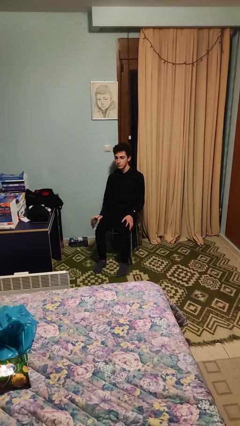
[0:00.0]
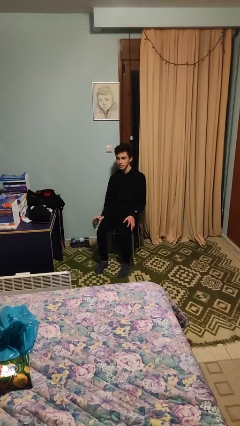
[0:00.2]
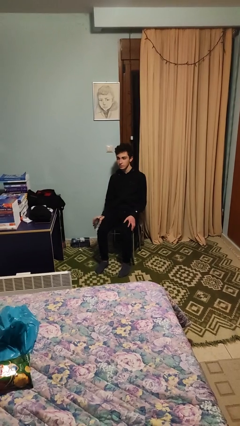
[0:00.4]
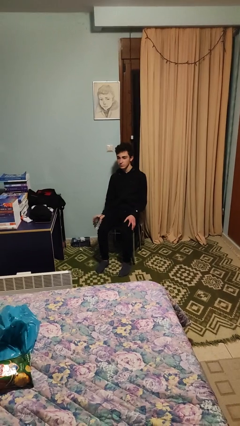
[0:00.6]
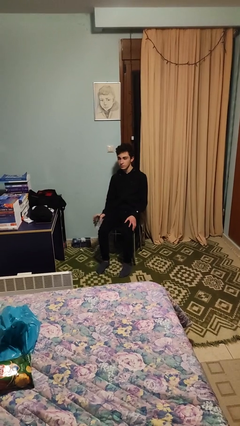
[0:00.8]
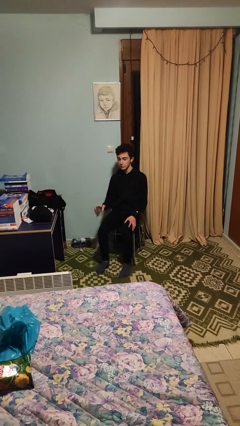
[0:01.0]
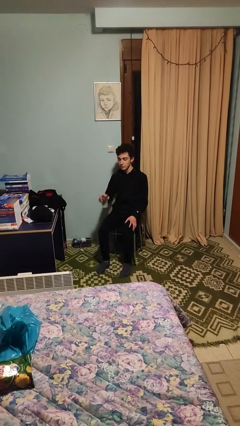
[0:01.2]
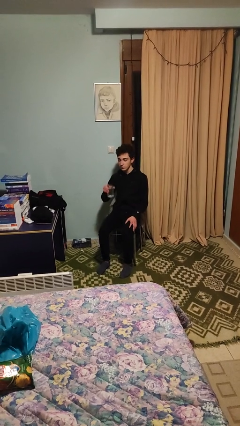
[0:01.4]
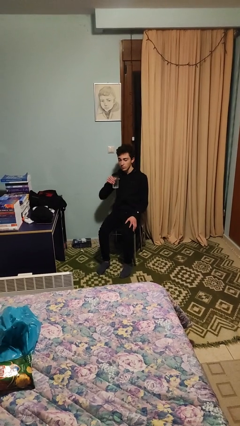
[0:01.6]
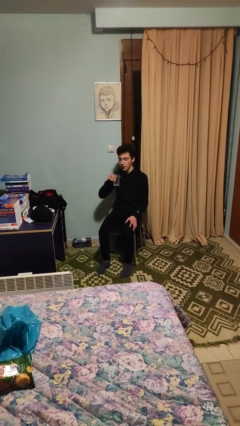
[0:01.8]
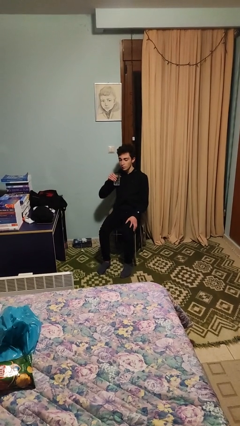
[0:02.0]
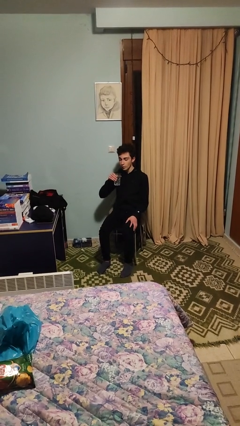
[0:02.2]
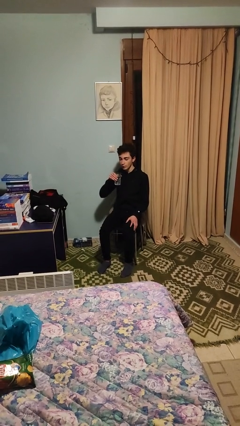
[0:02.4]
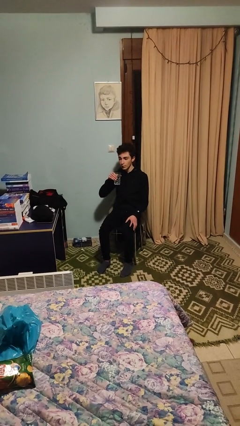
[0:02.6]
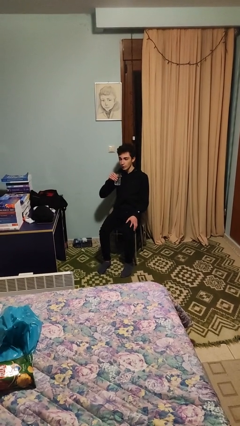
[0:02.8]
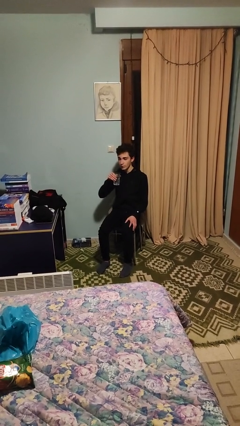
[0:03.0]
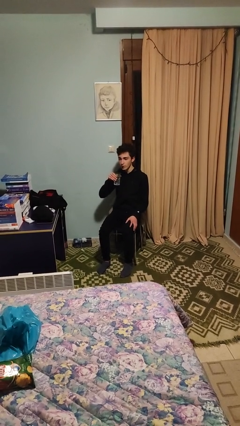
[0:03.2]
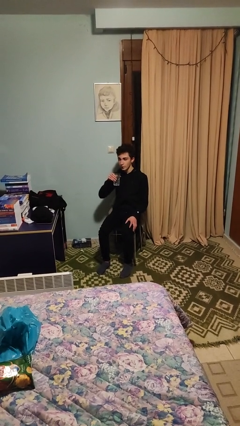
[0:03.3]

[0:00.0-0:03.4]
person drinks from straw

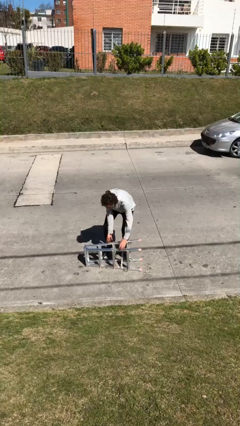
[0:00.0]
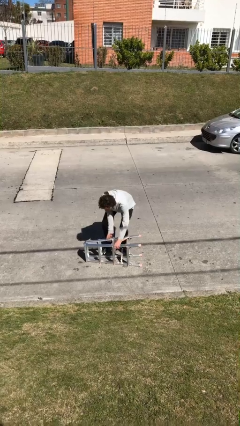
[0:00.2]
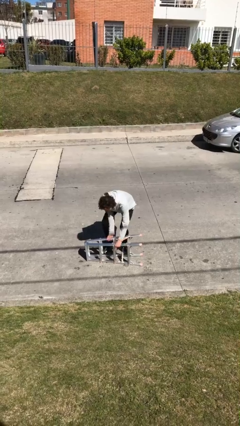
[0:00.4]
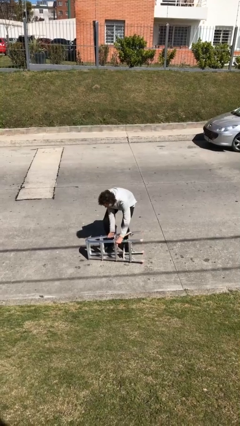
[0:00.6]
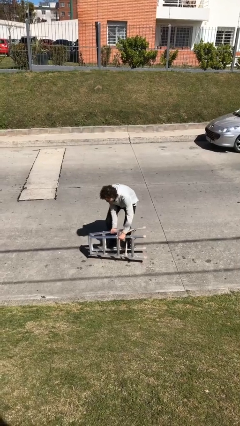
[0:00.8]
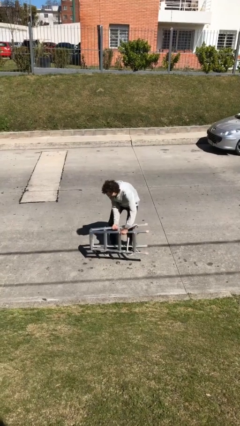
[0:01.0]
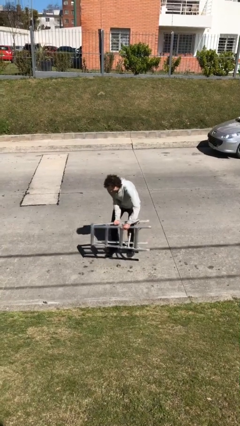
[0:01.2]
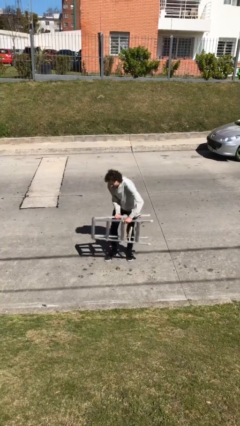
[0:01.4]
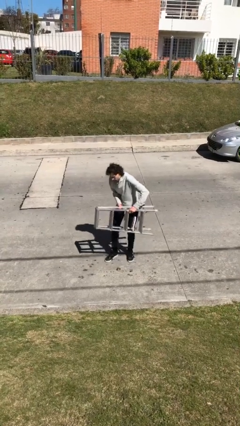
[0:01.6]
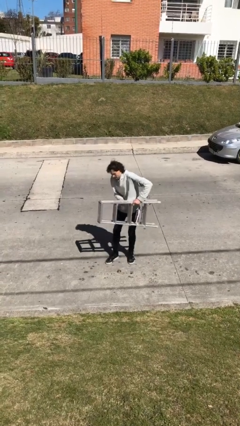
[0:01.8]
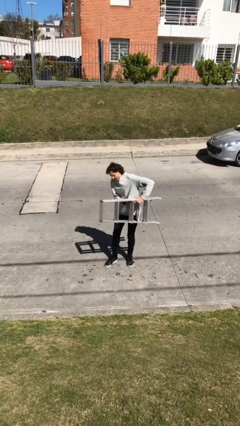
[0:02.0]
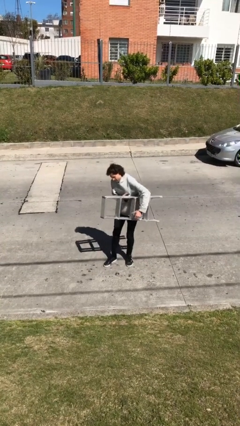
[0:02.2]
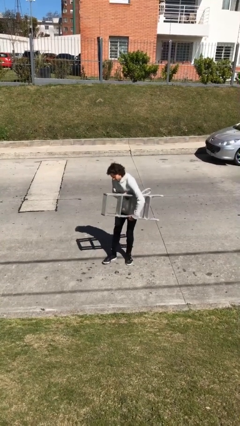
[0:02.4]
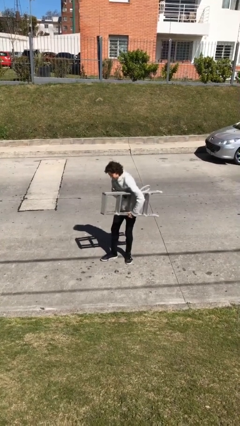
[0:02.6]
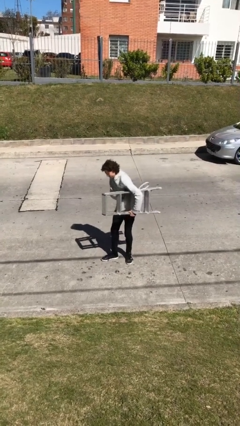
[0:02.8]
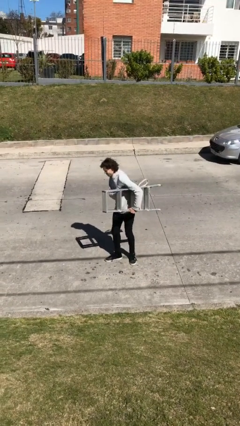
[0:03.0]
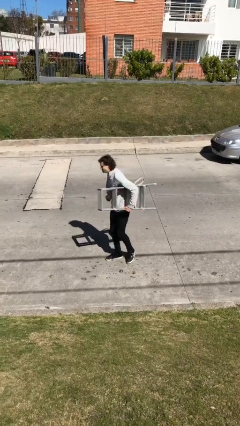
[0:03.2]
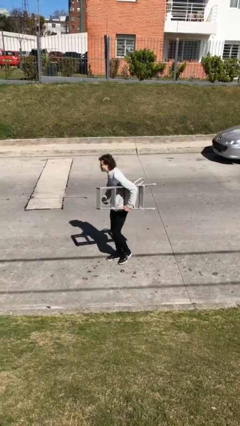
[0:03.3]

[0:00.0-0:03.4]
person picks up object from floor

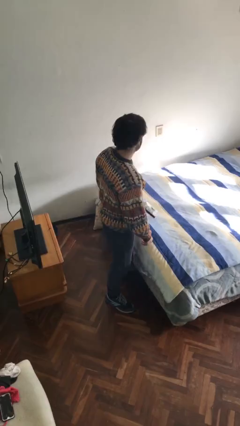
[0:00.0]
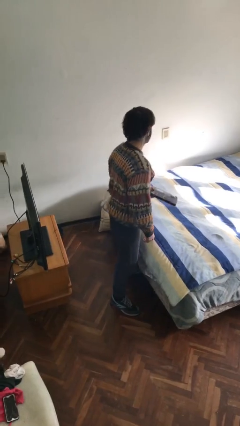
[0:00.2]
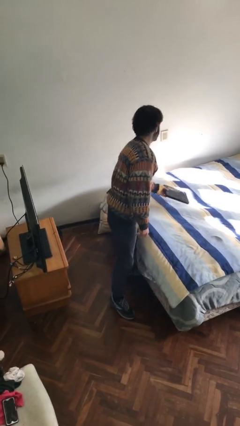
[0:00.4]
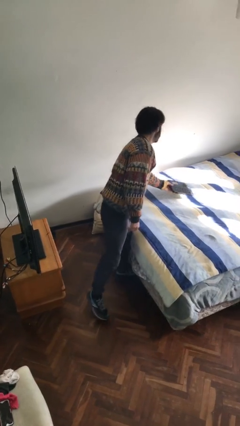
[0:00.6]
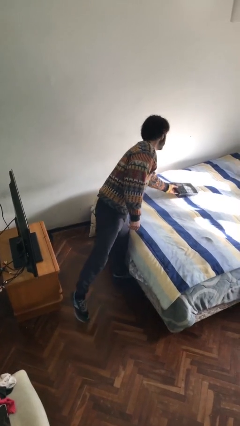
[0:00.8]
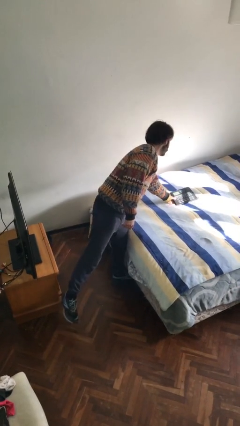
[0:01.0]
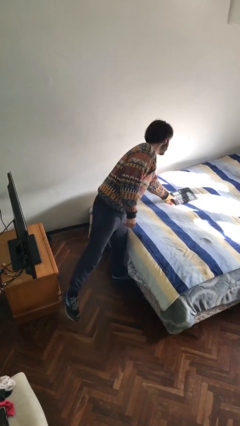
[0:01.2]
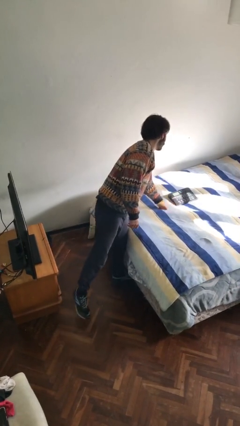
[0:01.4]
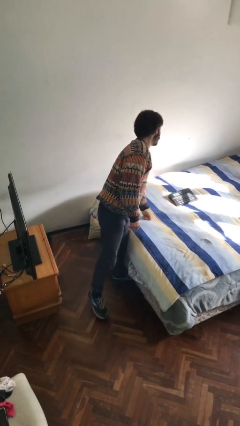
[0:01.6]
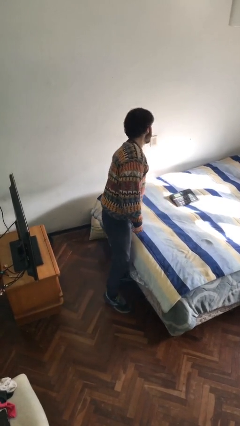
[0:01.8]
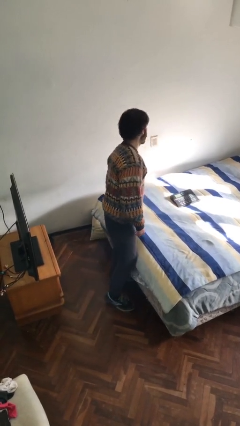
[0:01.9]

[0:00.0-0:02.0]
person puts down object on bed

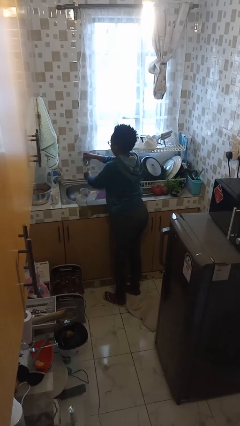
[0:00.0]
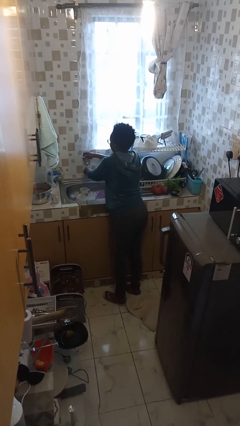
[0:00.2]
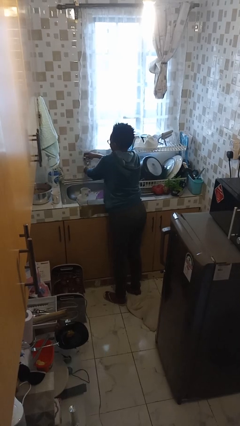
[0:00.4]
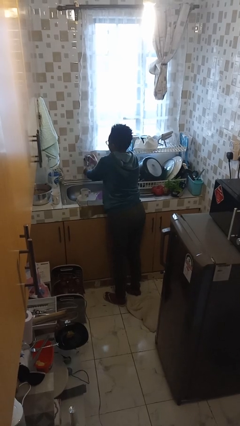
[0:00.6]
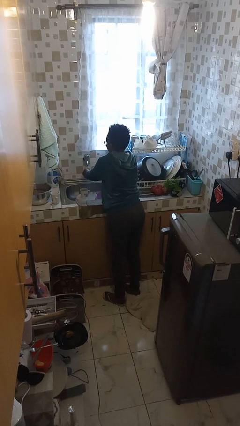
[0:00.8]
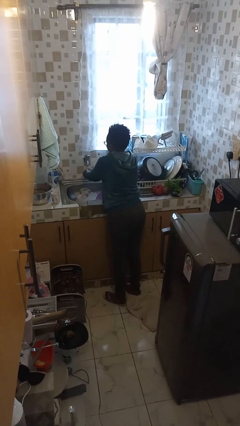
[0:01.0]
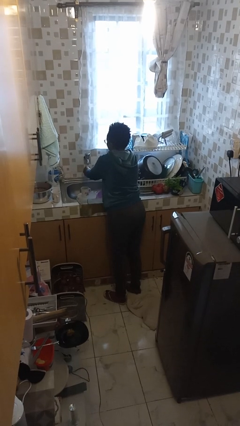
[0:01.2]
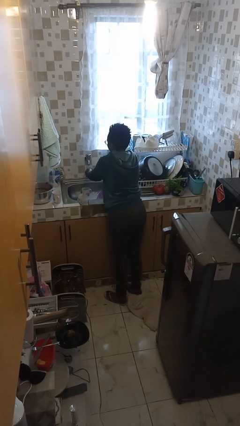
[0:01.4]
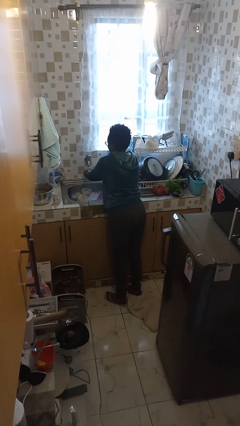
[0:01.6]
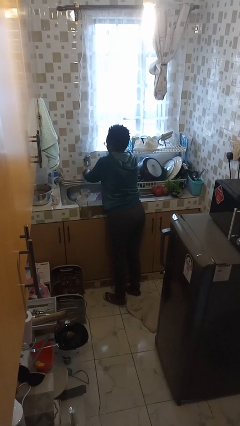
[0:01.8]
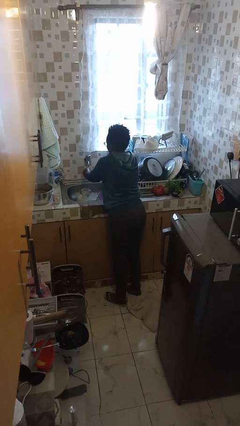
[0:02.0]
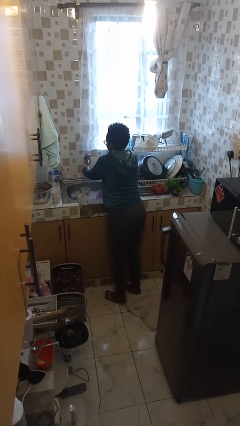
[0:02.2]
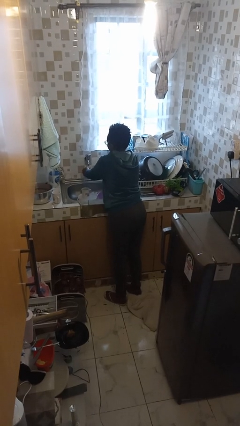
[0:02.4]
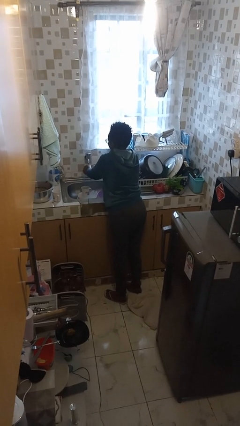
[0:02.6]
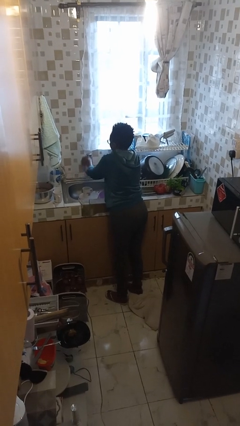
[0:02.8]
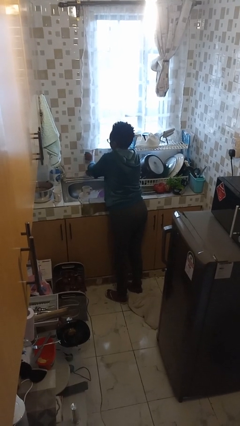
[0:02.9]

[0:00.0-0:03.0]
person washes hands

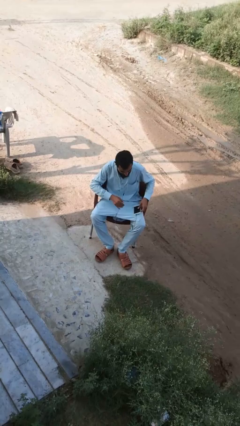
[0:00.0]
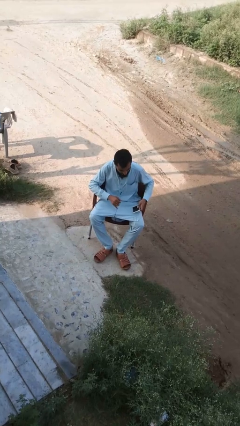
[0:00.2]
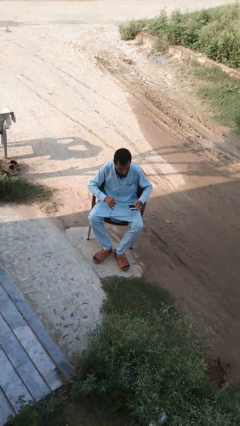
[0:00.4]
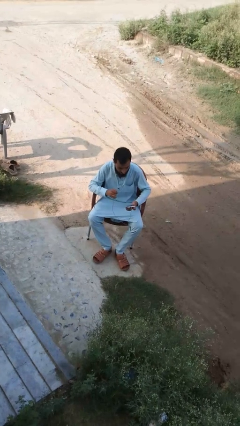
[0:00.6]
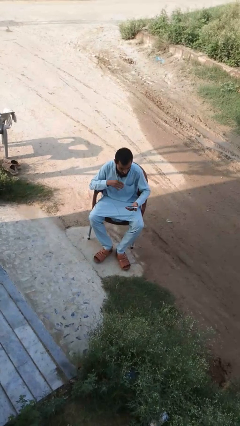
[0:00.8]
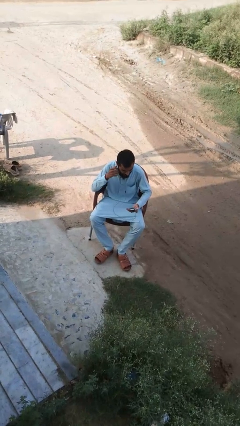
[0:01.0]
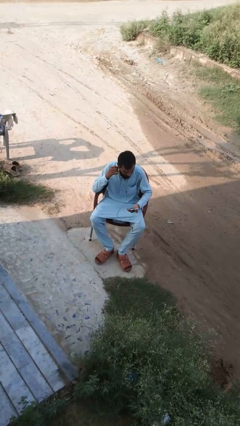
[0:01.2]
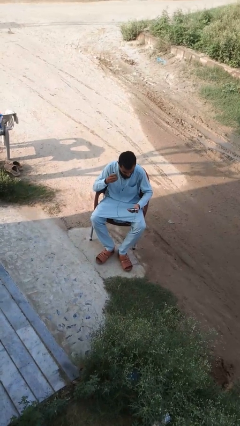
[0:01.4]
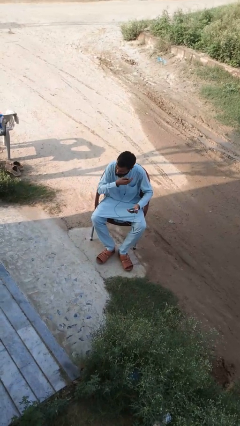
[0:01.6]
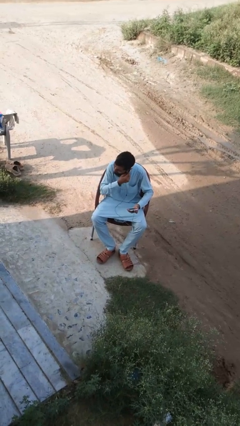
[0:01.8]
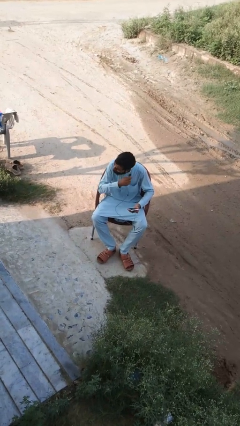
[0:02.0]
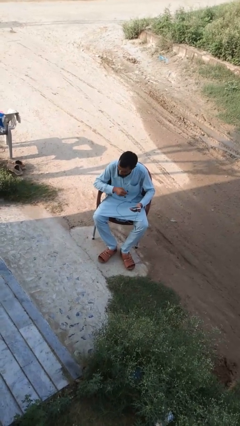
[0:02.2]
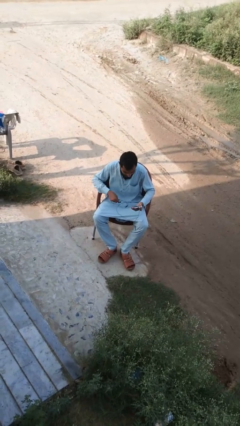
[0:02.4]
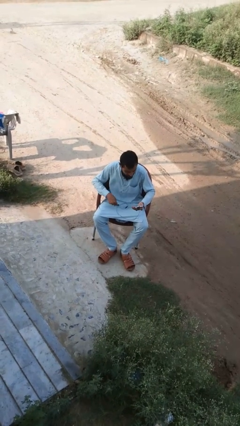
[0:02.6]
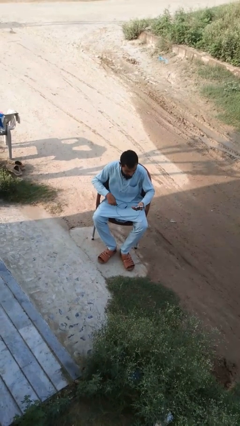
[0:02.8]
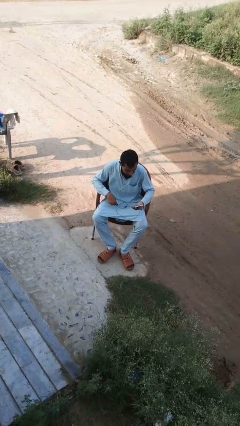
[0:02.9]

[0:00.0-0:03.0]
person takes off headphones

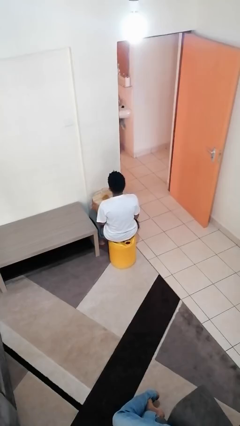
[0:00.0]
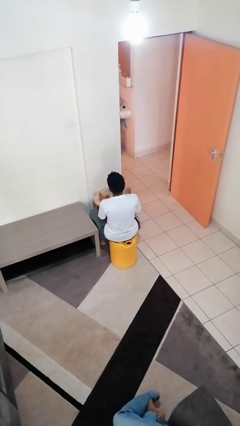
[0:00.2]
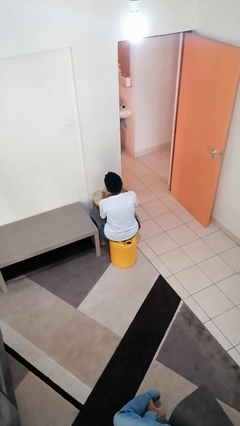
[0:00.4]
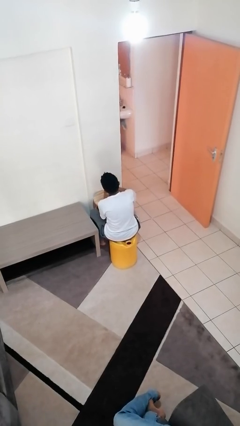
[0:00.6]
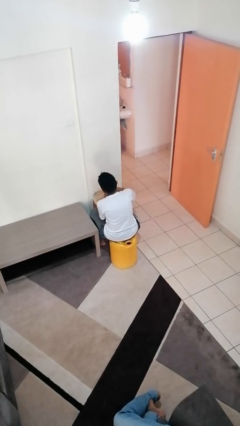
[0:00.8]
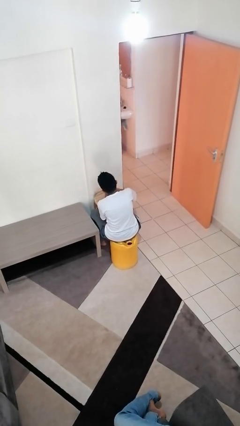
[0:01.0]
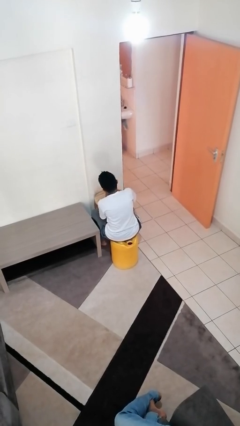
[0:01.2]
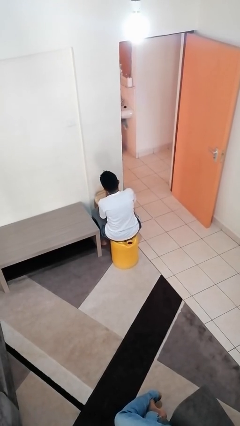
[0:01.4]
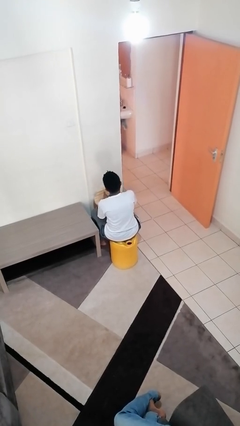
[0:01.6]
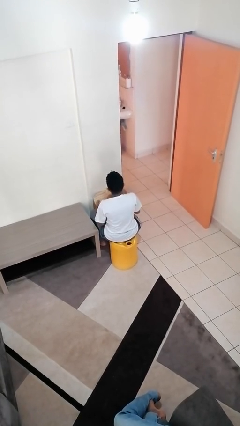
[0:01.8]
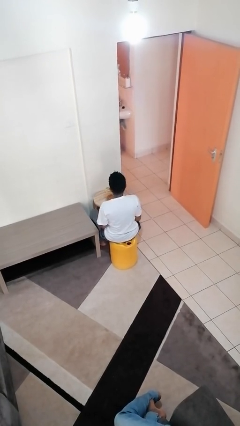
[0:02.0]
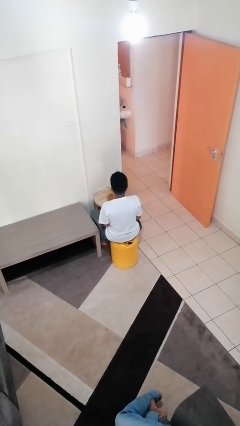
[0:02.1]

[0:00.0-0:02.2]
person closes jar

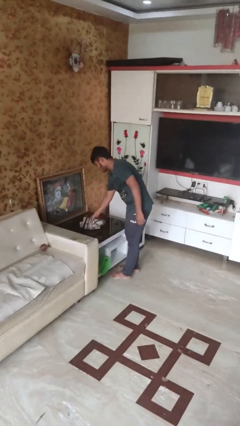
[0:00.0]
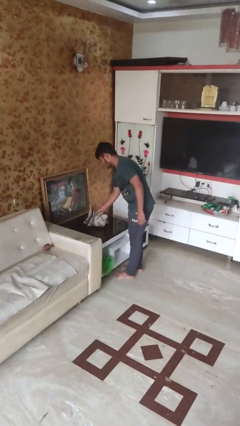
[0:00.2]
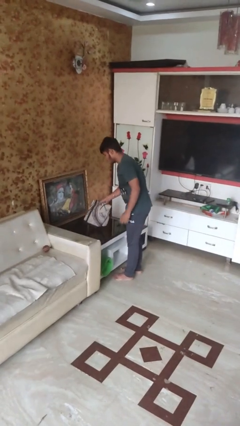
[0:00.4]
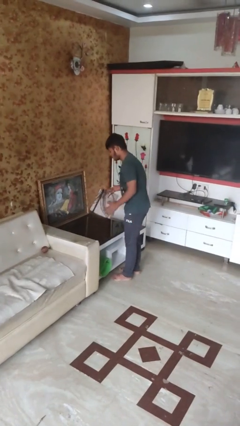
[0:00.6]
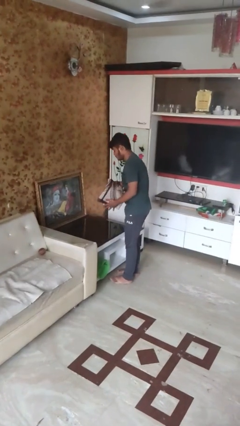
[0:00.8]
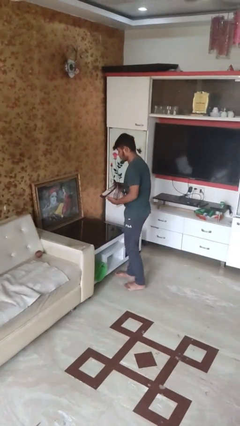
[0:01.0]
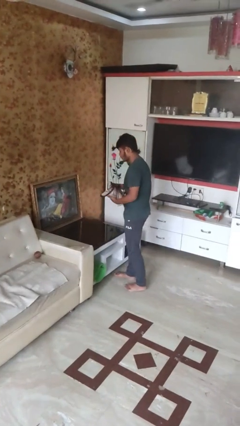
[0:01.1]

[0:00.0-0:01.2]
person picks up object from table
